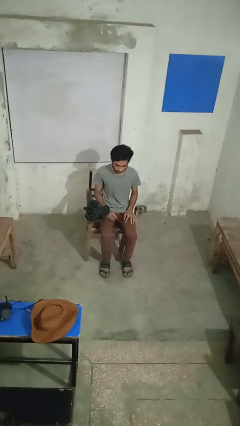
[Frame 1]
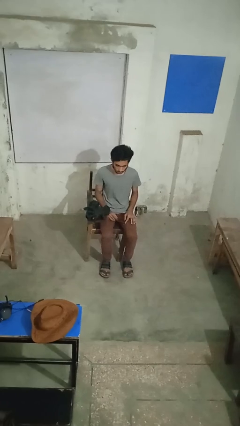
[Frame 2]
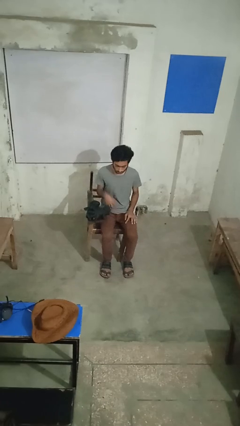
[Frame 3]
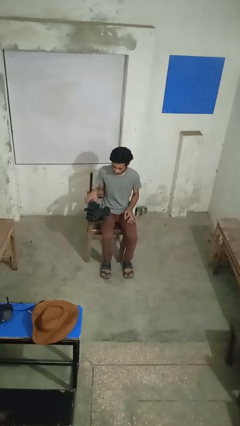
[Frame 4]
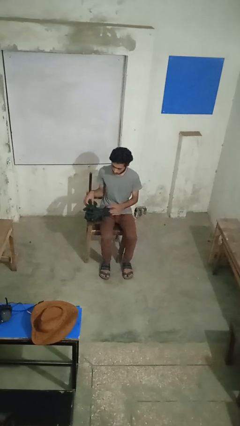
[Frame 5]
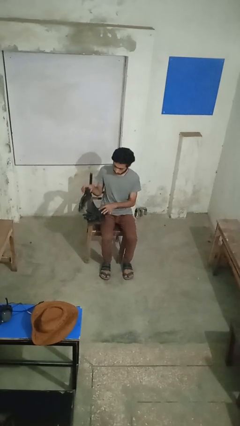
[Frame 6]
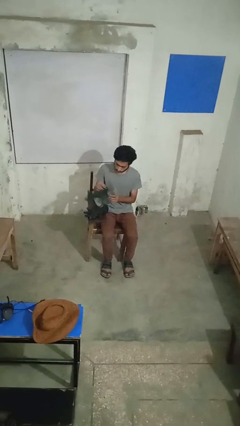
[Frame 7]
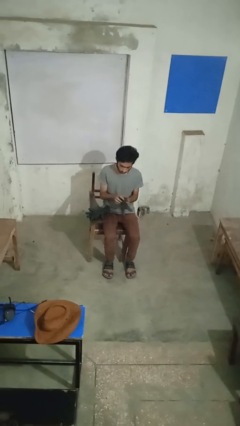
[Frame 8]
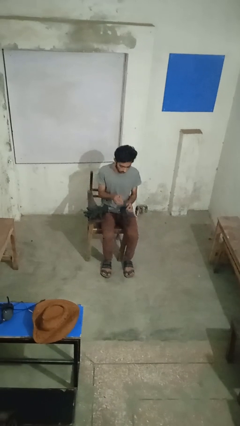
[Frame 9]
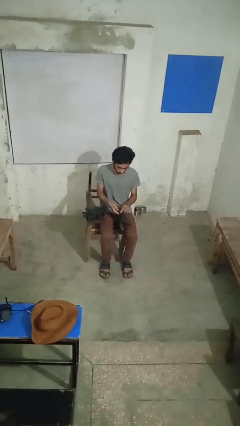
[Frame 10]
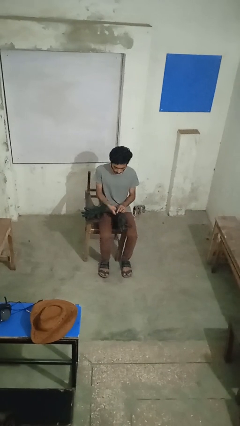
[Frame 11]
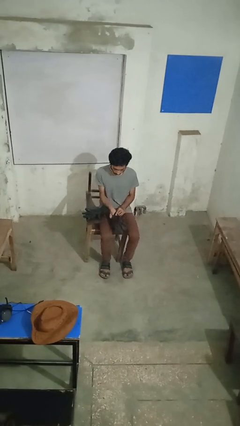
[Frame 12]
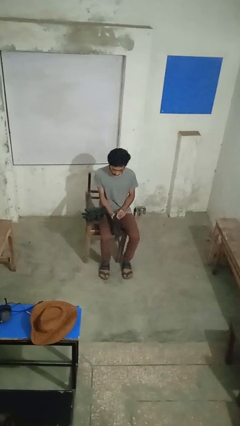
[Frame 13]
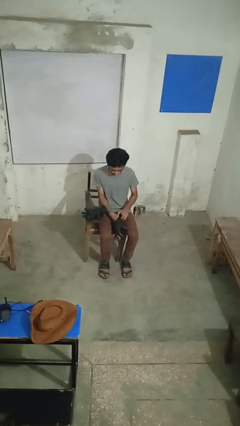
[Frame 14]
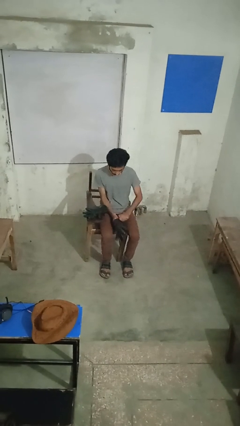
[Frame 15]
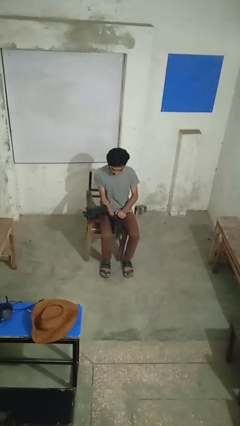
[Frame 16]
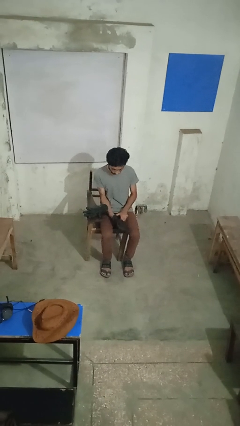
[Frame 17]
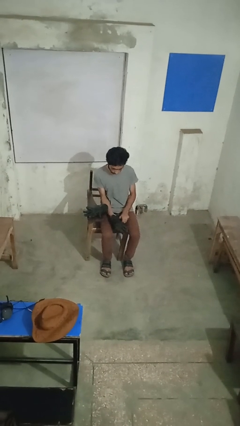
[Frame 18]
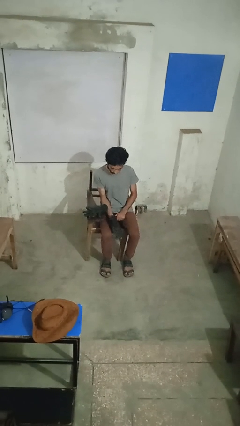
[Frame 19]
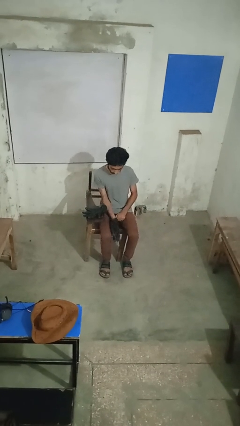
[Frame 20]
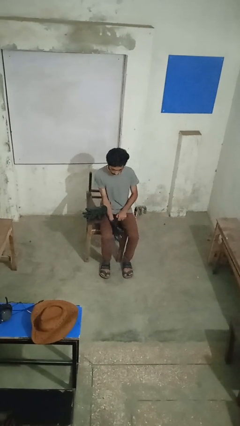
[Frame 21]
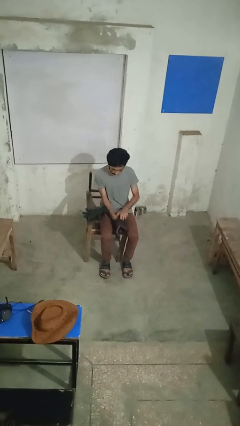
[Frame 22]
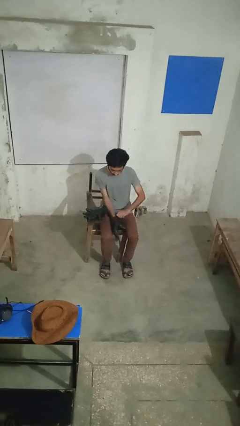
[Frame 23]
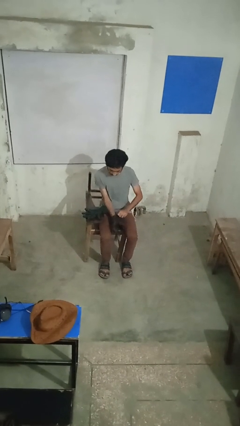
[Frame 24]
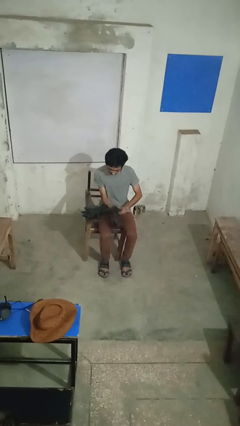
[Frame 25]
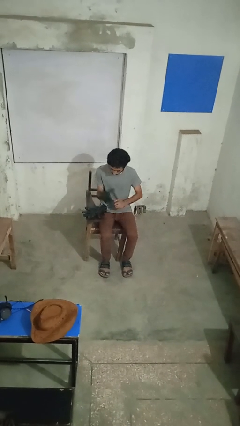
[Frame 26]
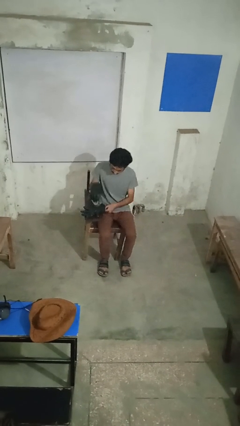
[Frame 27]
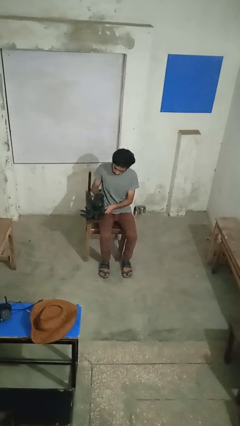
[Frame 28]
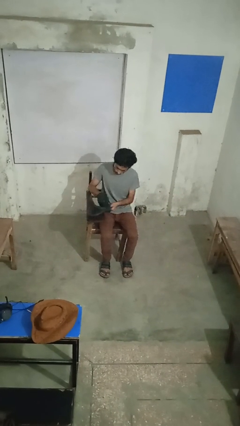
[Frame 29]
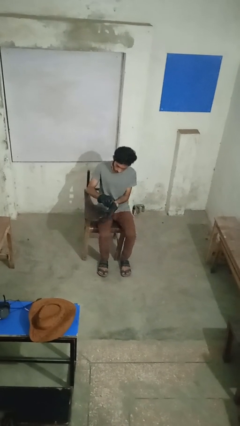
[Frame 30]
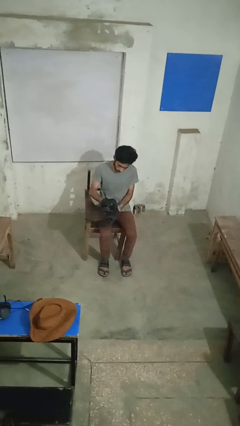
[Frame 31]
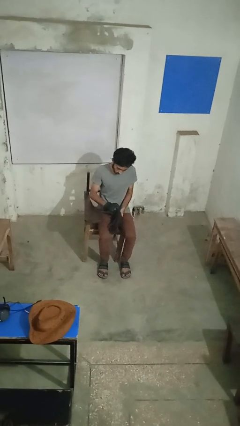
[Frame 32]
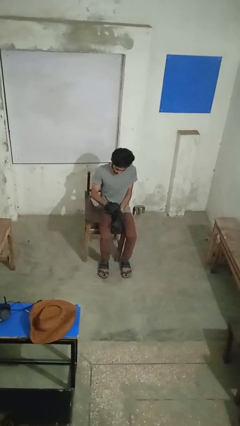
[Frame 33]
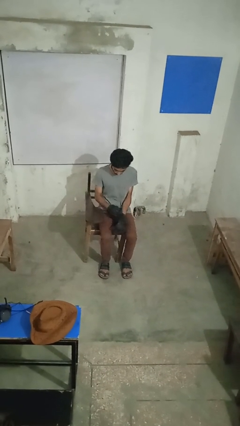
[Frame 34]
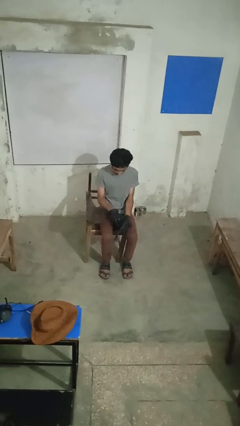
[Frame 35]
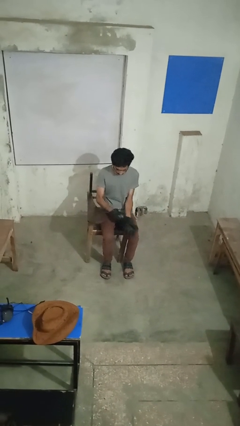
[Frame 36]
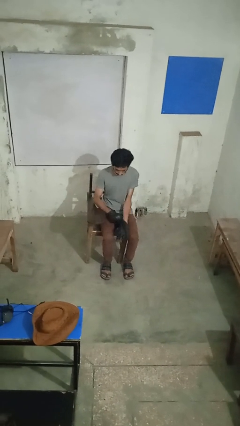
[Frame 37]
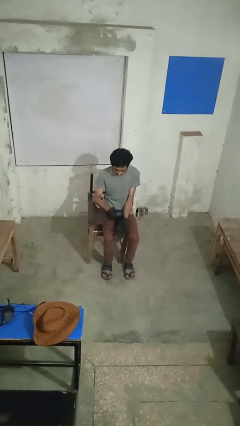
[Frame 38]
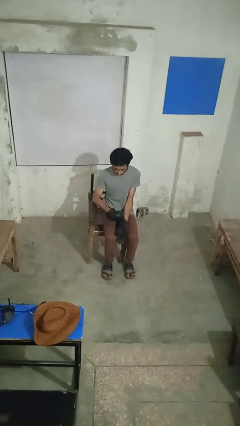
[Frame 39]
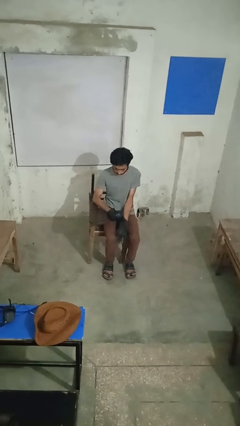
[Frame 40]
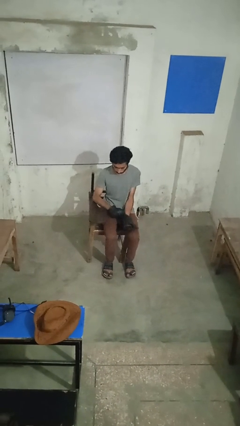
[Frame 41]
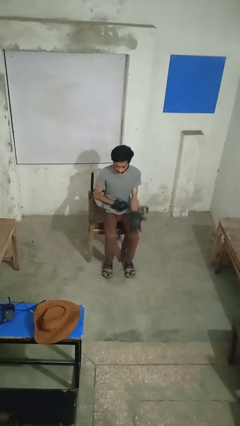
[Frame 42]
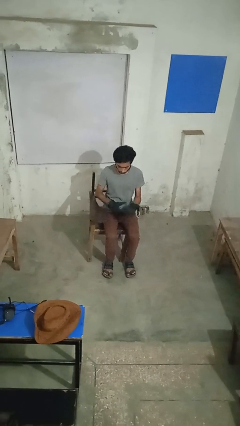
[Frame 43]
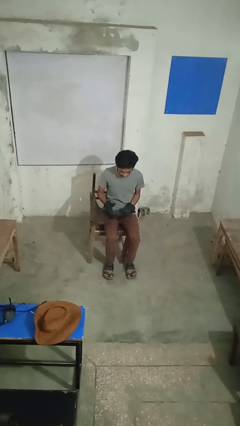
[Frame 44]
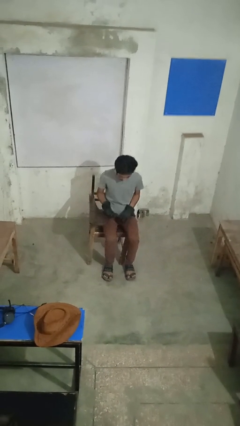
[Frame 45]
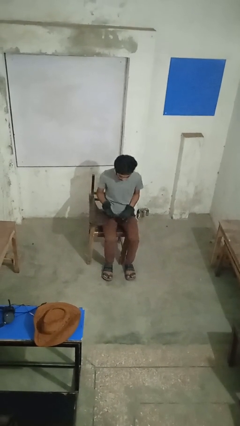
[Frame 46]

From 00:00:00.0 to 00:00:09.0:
person puts on gloves

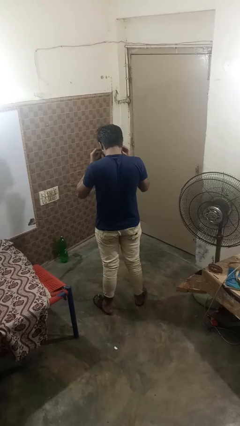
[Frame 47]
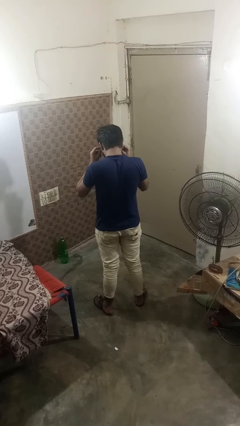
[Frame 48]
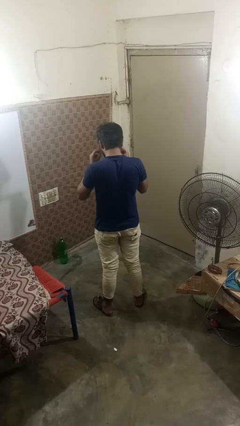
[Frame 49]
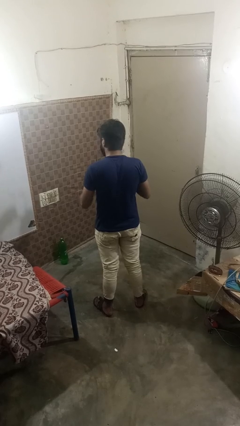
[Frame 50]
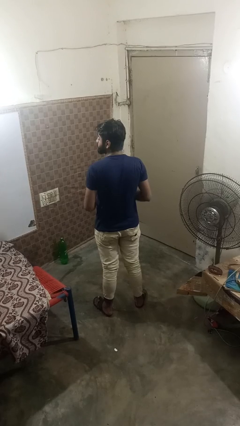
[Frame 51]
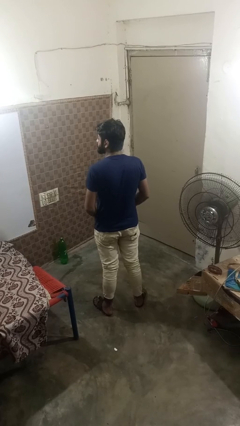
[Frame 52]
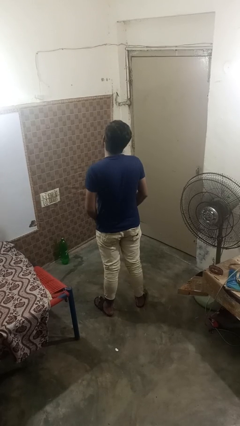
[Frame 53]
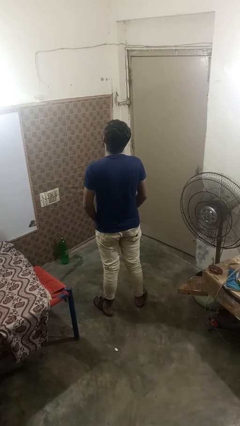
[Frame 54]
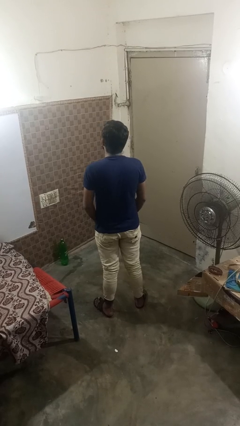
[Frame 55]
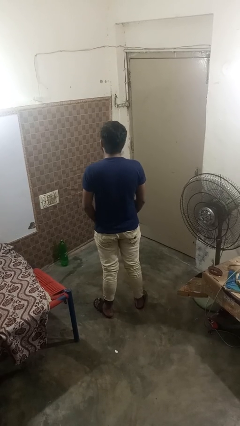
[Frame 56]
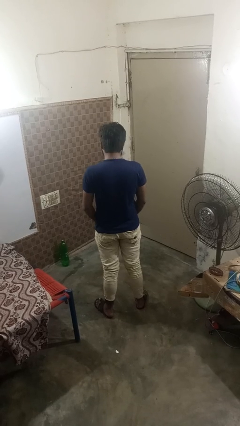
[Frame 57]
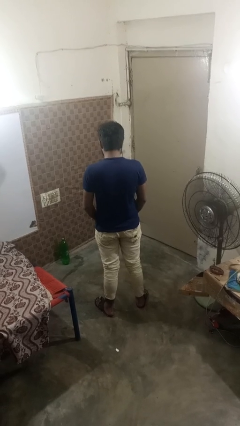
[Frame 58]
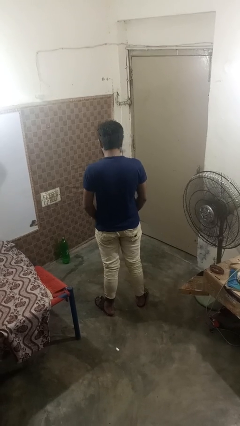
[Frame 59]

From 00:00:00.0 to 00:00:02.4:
person takes off glasses

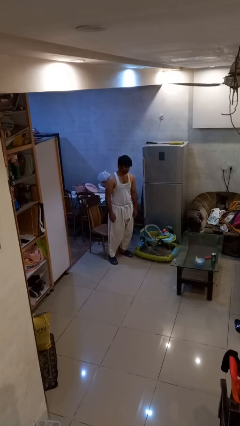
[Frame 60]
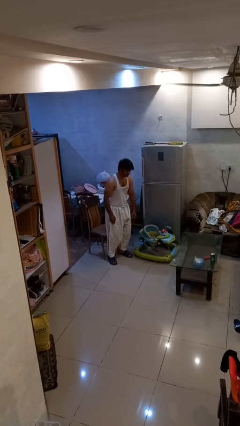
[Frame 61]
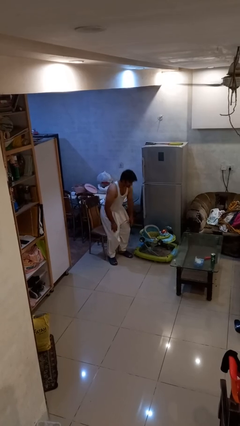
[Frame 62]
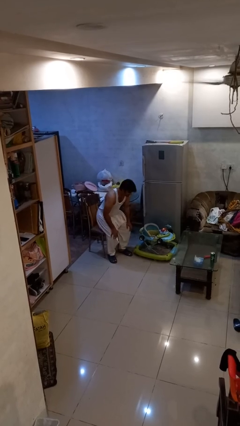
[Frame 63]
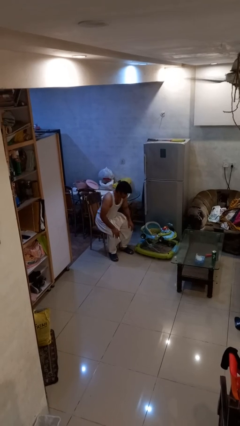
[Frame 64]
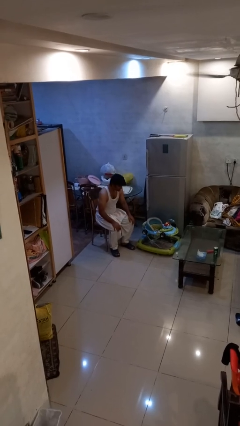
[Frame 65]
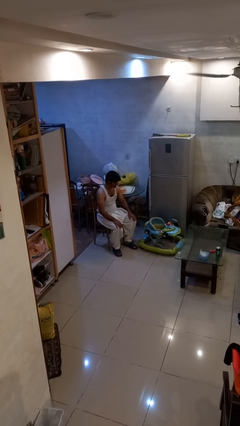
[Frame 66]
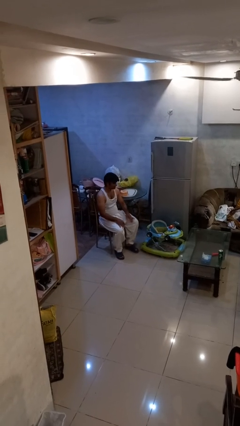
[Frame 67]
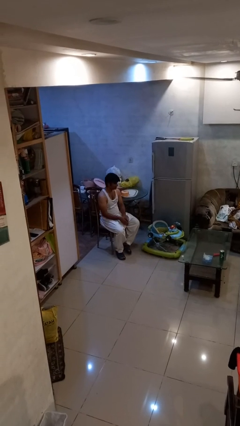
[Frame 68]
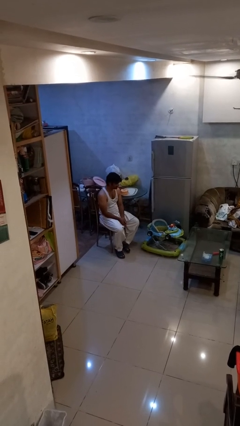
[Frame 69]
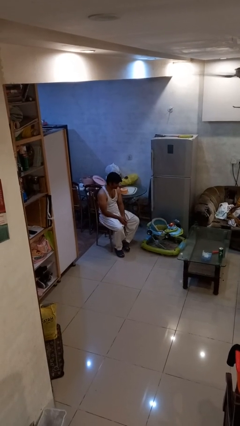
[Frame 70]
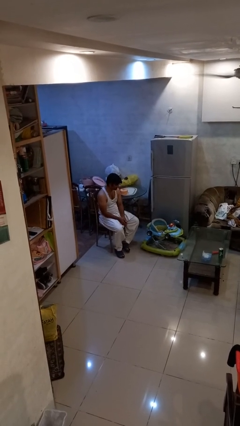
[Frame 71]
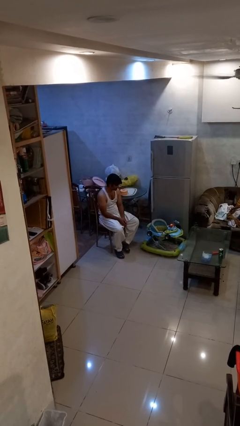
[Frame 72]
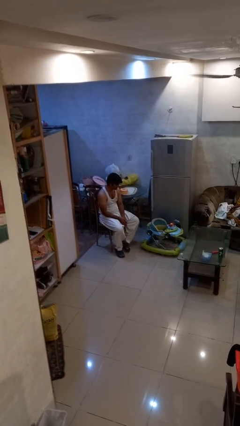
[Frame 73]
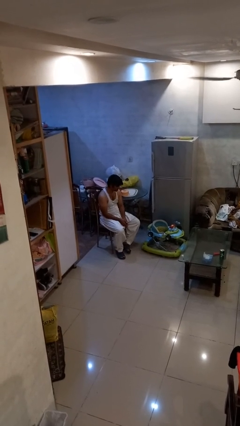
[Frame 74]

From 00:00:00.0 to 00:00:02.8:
person sits down

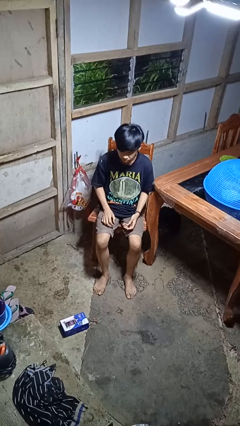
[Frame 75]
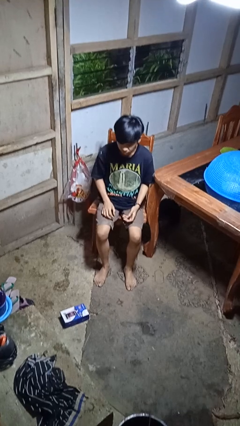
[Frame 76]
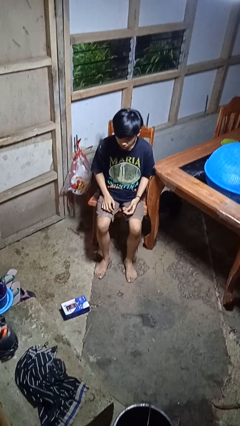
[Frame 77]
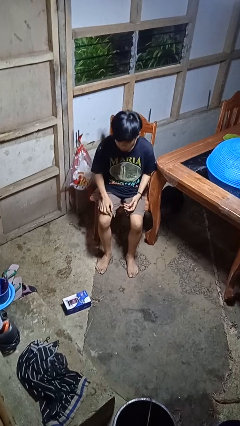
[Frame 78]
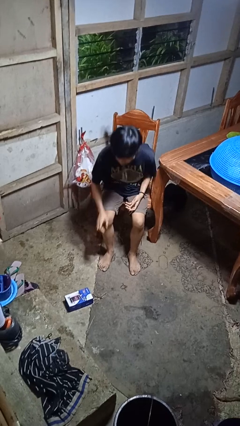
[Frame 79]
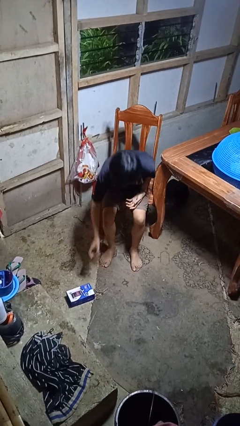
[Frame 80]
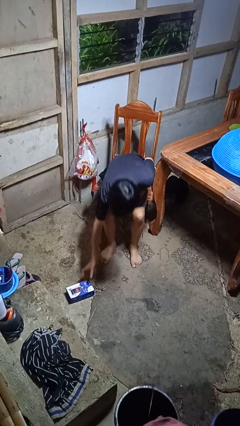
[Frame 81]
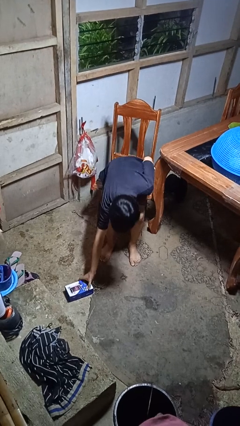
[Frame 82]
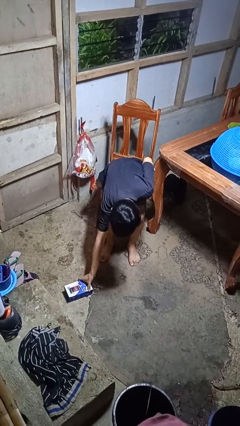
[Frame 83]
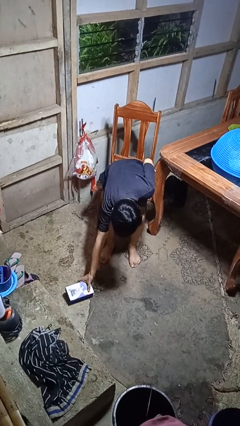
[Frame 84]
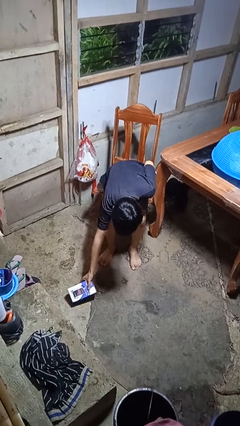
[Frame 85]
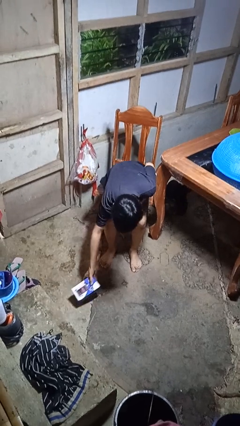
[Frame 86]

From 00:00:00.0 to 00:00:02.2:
person picks up object from floor

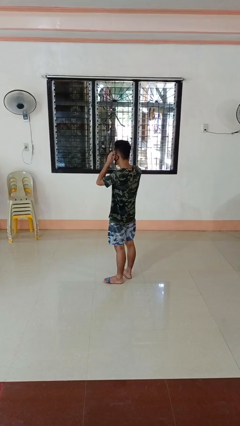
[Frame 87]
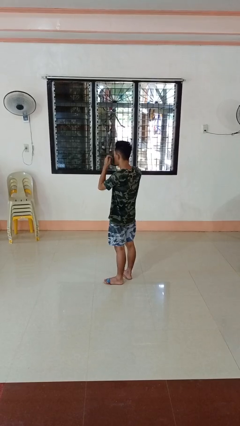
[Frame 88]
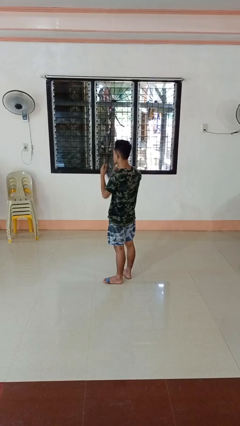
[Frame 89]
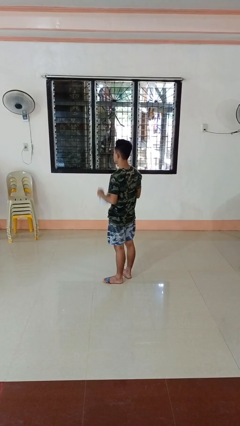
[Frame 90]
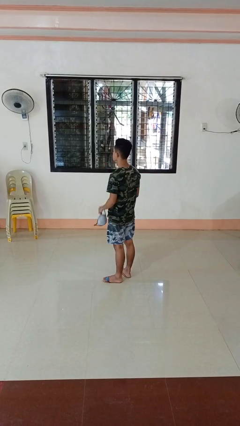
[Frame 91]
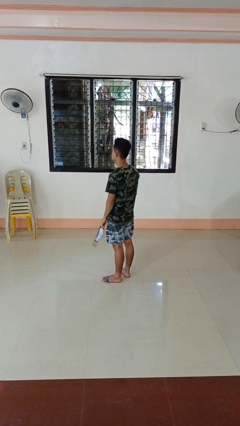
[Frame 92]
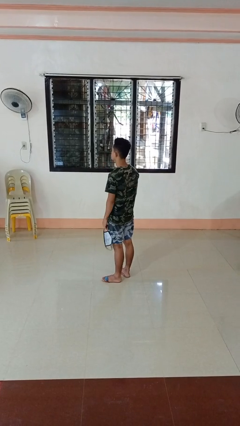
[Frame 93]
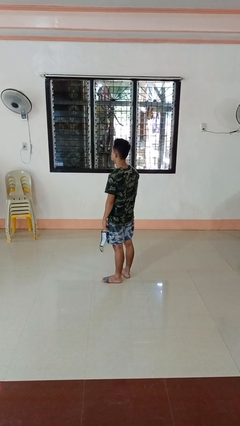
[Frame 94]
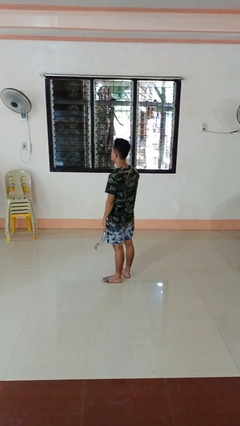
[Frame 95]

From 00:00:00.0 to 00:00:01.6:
person takes off facemask
